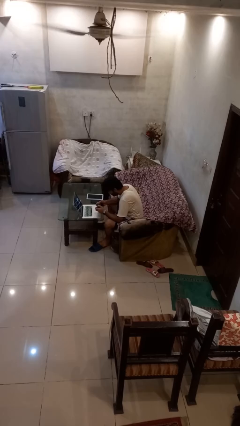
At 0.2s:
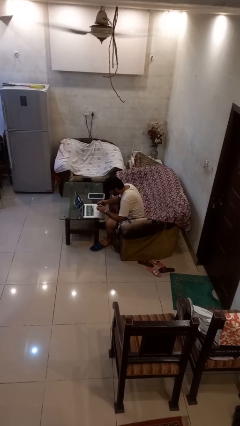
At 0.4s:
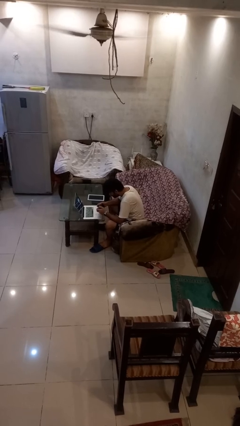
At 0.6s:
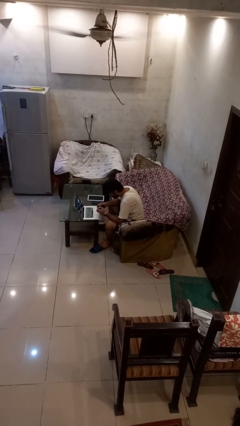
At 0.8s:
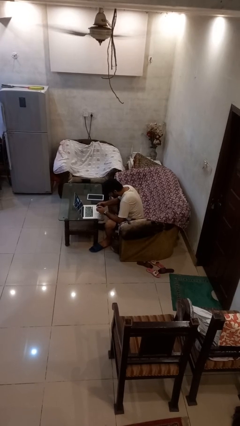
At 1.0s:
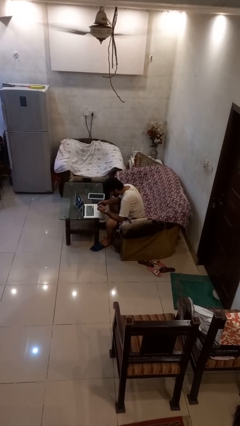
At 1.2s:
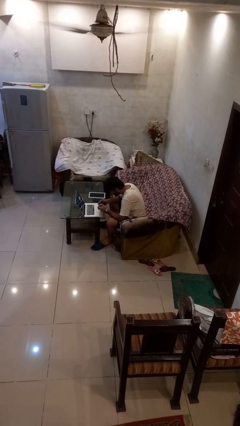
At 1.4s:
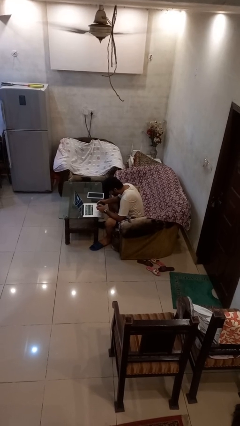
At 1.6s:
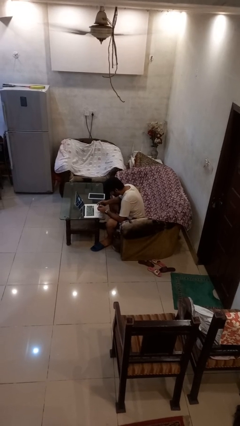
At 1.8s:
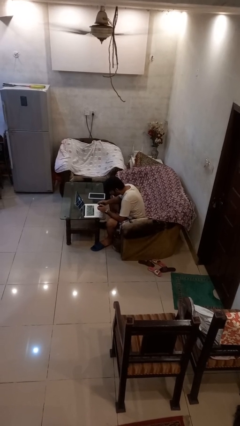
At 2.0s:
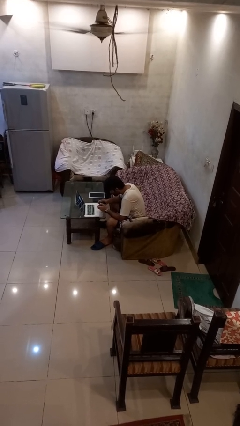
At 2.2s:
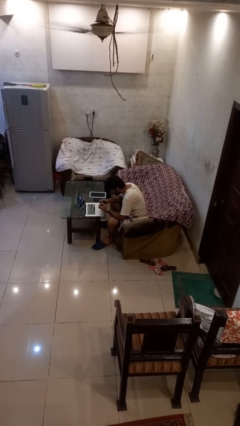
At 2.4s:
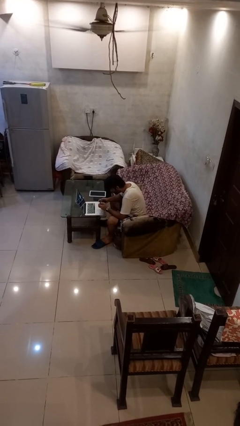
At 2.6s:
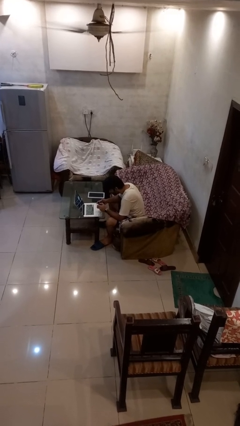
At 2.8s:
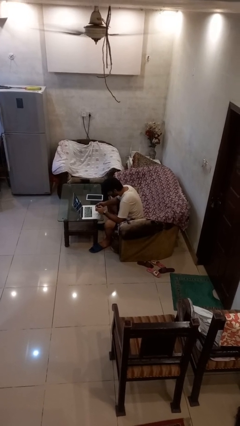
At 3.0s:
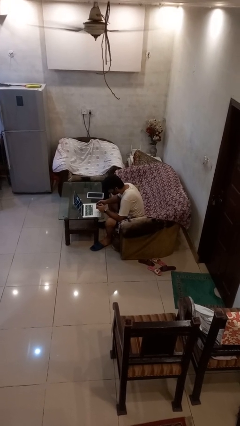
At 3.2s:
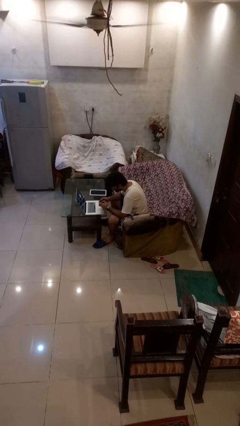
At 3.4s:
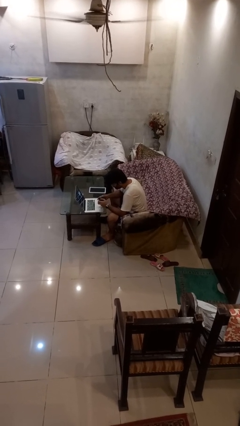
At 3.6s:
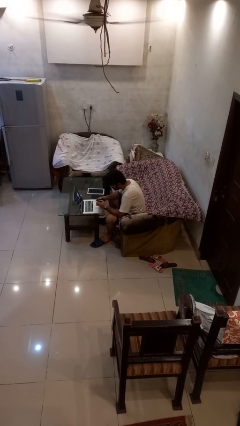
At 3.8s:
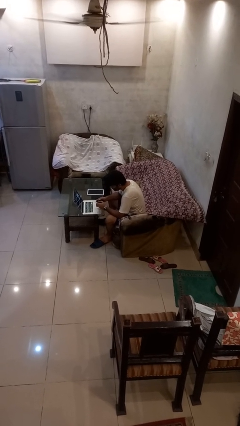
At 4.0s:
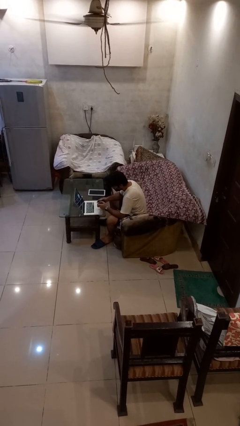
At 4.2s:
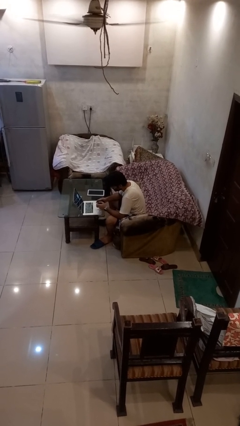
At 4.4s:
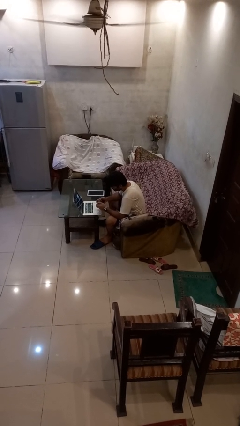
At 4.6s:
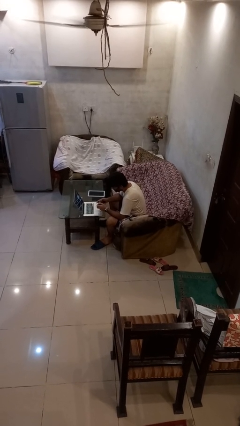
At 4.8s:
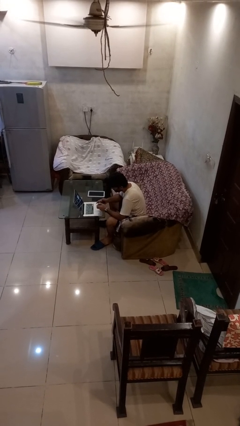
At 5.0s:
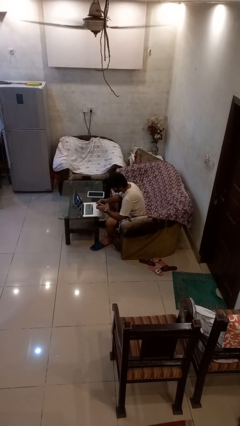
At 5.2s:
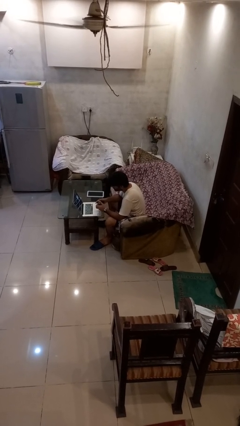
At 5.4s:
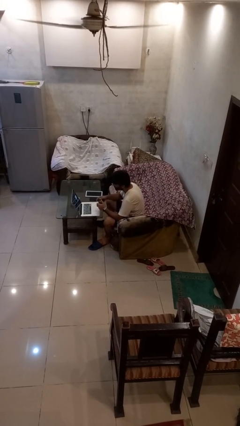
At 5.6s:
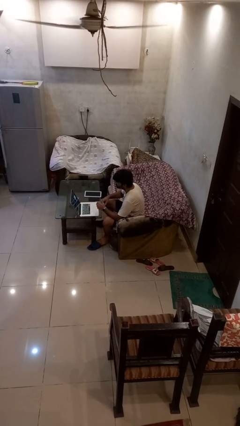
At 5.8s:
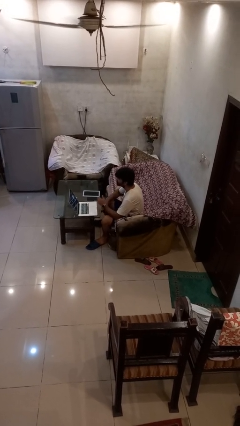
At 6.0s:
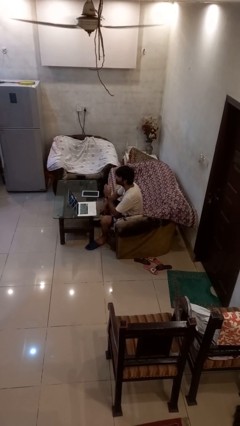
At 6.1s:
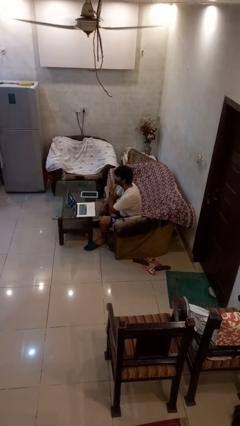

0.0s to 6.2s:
person interacts with handheld game

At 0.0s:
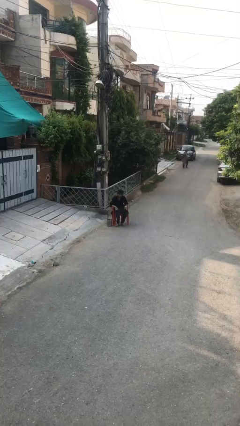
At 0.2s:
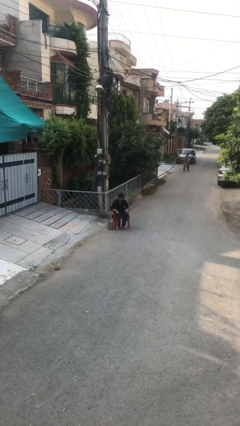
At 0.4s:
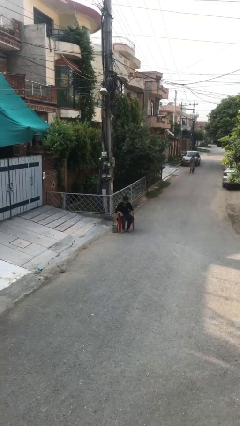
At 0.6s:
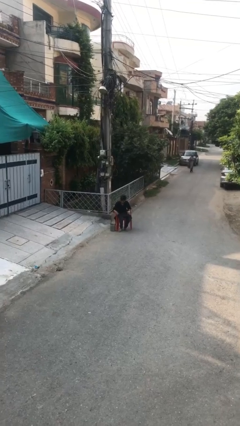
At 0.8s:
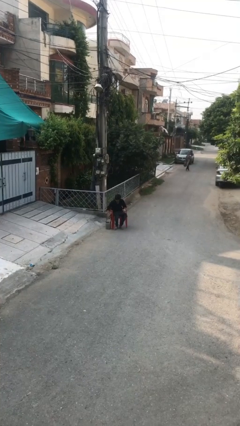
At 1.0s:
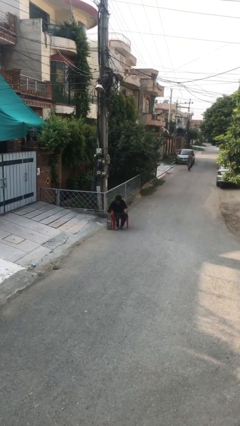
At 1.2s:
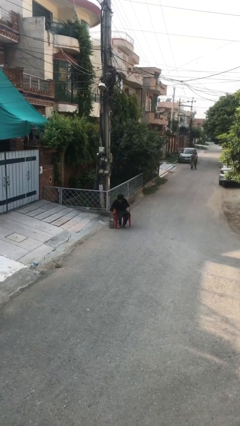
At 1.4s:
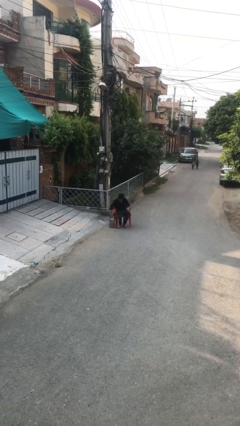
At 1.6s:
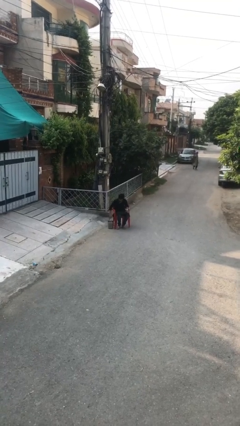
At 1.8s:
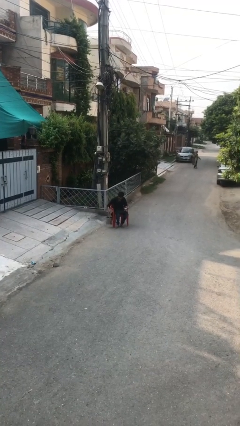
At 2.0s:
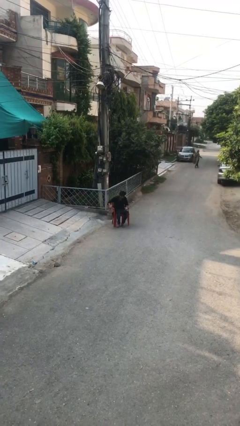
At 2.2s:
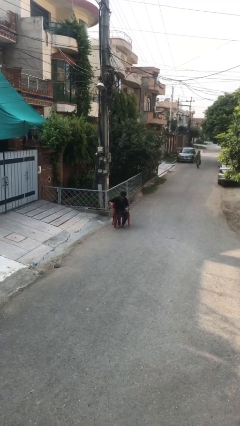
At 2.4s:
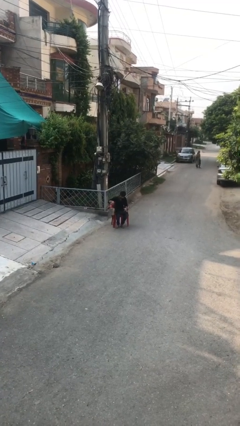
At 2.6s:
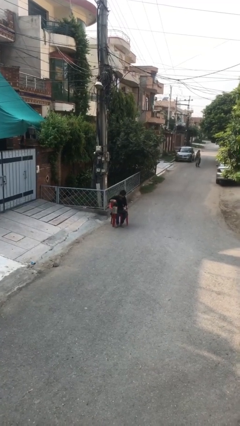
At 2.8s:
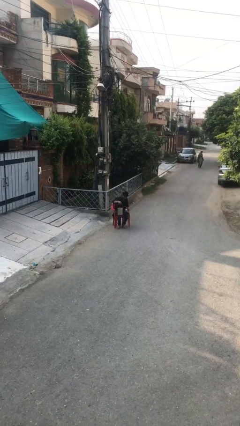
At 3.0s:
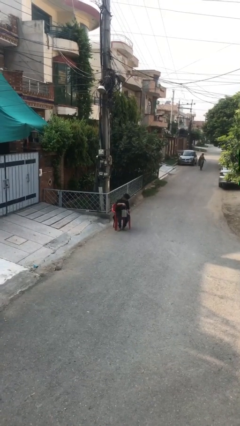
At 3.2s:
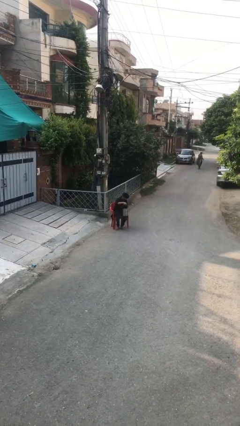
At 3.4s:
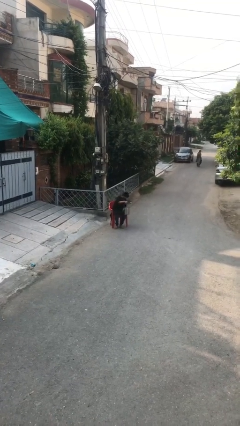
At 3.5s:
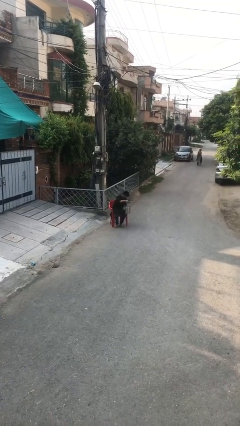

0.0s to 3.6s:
person picks up object from floor

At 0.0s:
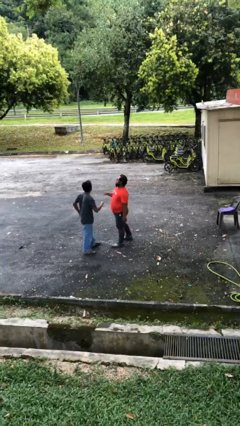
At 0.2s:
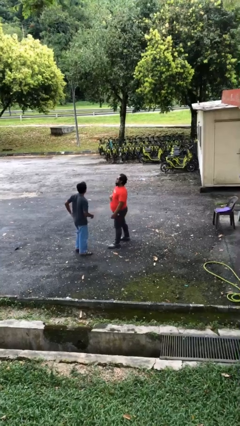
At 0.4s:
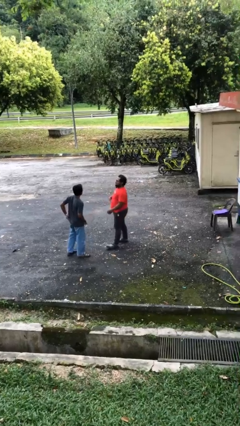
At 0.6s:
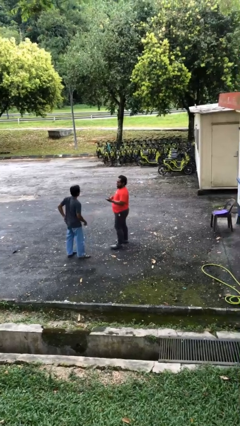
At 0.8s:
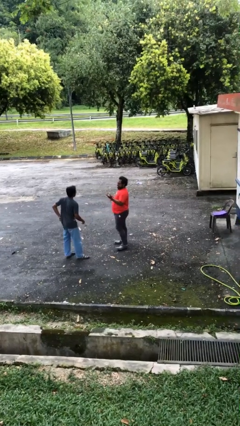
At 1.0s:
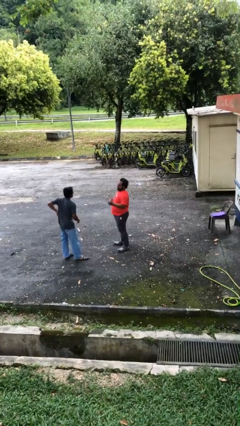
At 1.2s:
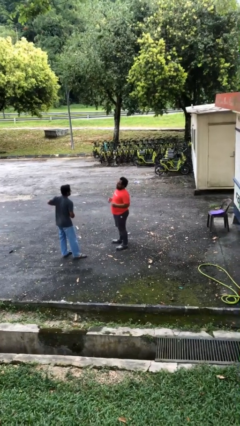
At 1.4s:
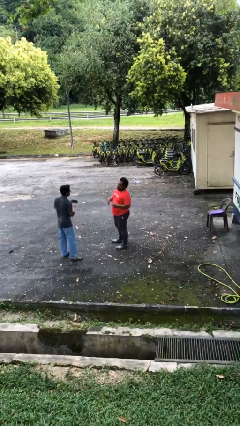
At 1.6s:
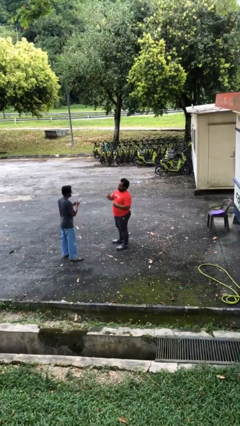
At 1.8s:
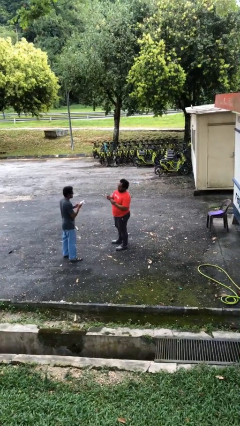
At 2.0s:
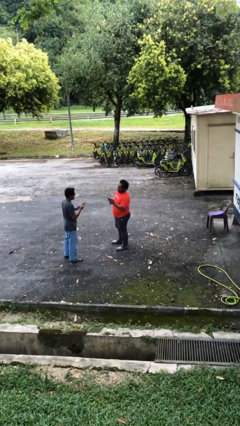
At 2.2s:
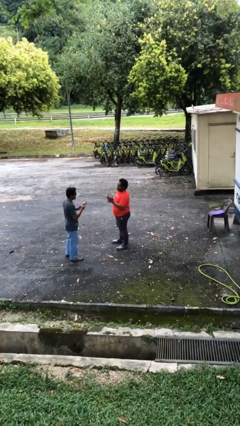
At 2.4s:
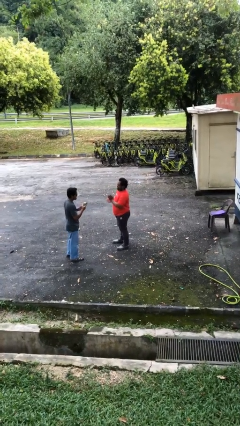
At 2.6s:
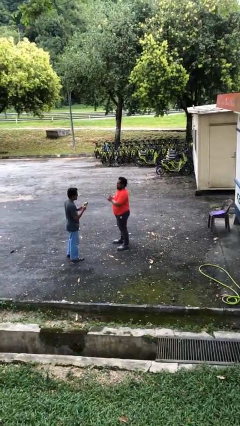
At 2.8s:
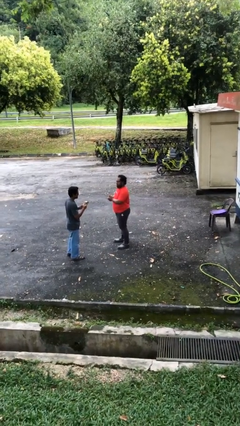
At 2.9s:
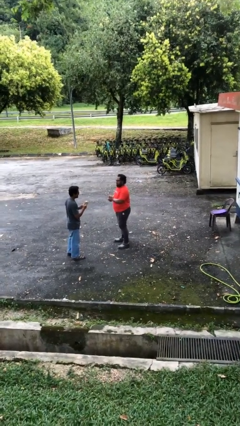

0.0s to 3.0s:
person talks to person

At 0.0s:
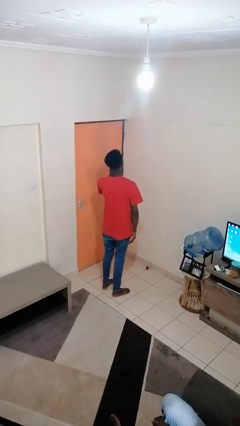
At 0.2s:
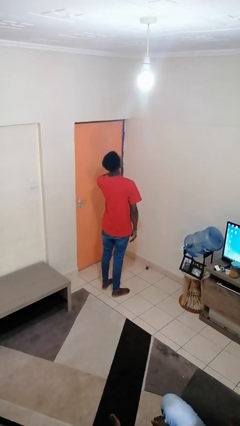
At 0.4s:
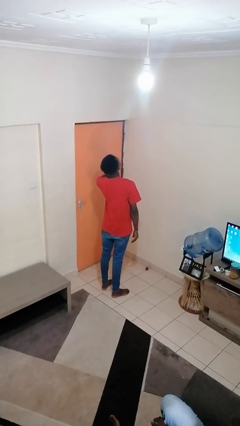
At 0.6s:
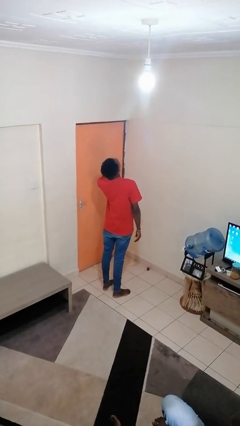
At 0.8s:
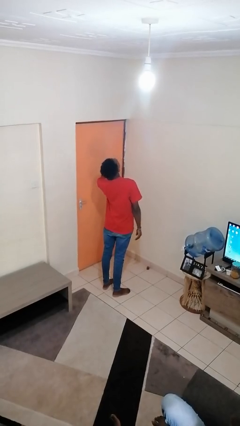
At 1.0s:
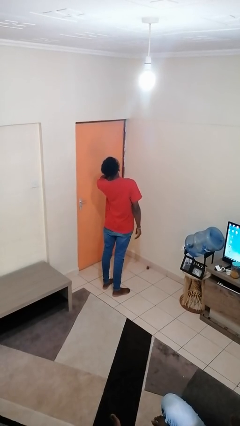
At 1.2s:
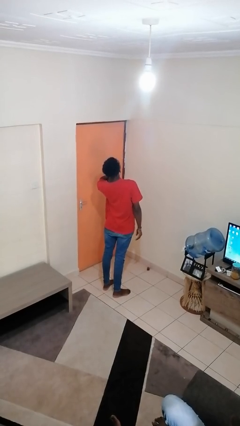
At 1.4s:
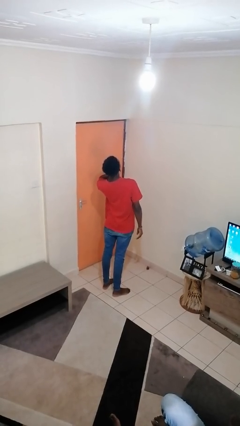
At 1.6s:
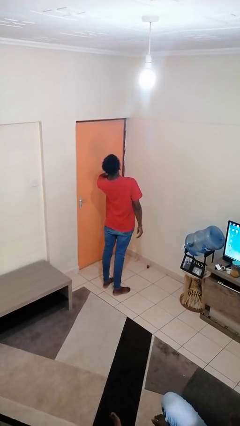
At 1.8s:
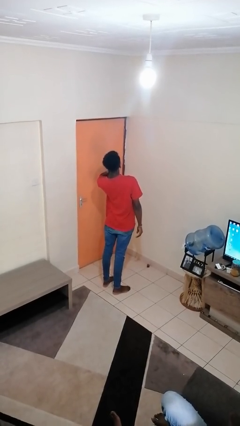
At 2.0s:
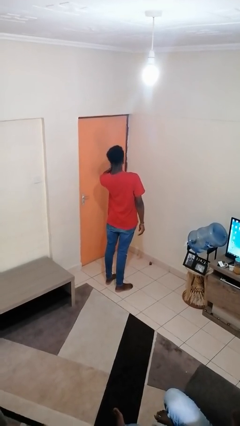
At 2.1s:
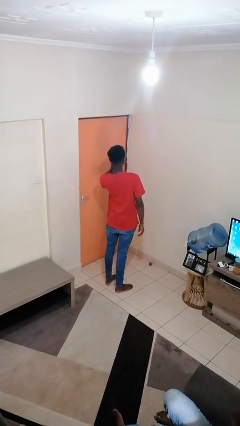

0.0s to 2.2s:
person yawns

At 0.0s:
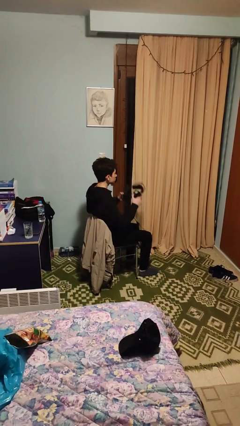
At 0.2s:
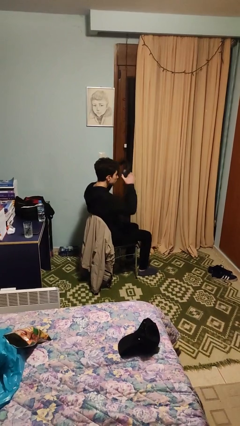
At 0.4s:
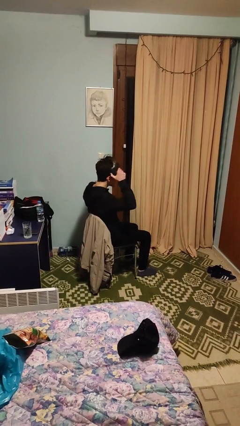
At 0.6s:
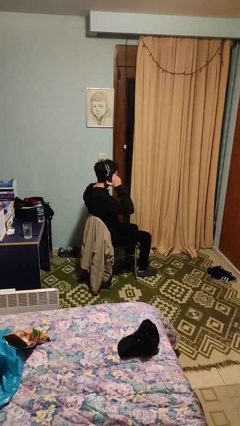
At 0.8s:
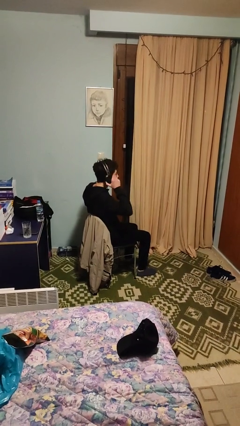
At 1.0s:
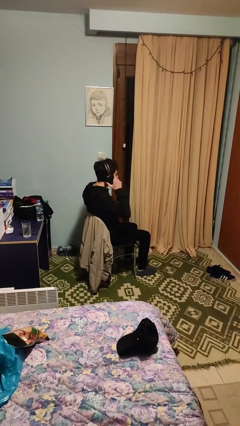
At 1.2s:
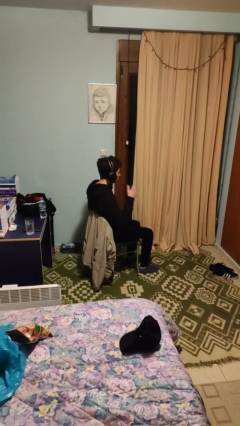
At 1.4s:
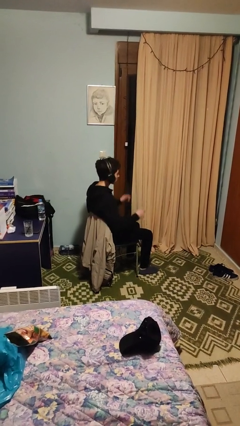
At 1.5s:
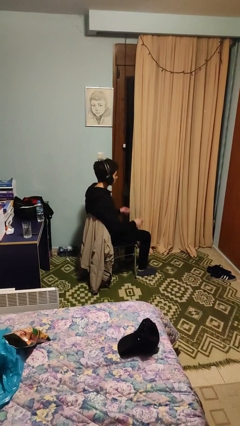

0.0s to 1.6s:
person puts on headphones

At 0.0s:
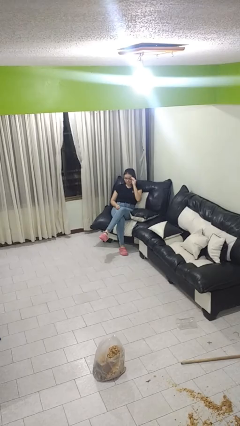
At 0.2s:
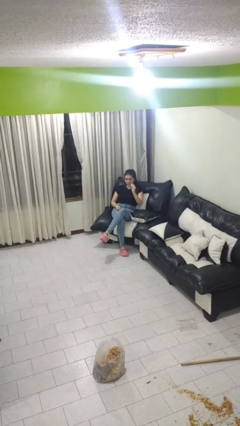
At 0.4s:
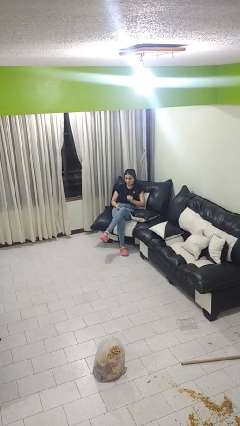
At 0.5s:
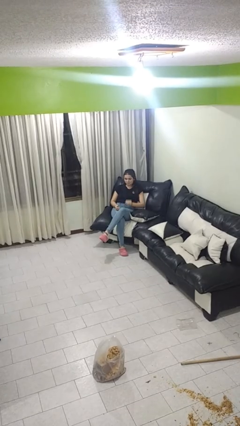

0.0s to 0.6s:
person takes off glasses

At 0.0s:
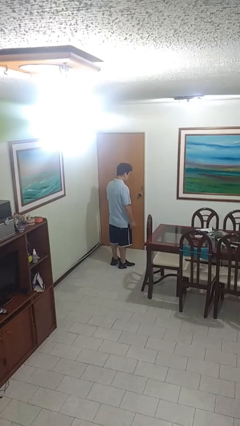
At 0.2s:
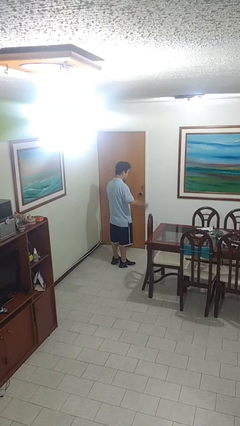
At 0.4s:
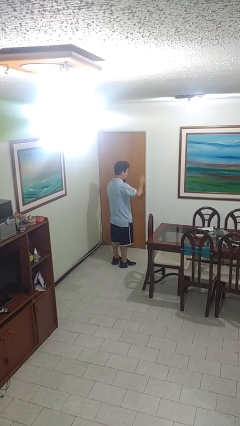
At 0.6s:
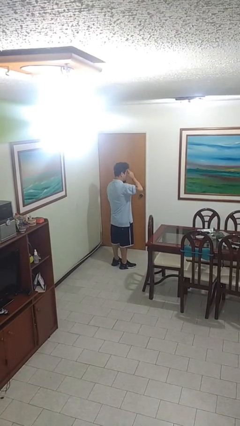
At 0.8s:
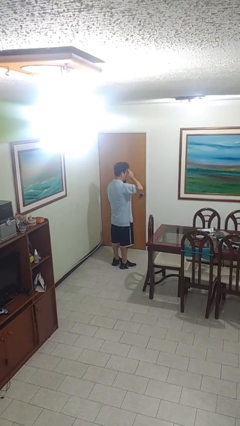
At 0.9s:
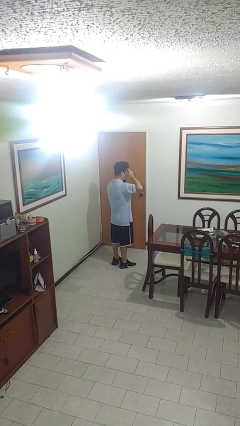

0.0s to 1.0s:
person salutes
